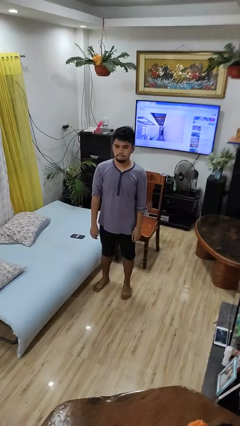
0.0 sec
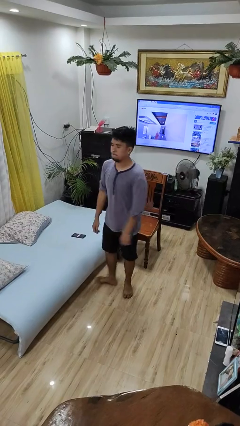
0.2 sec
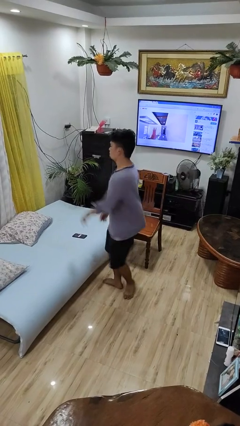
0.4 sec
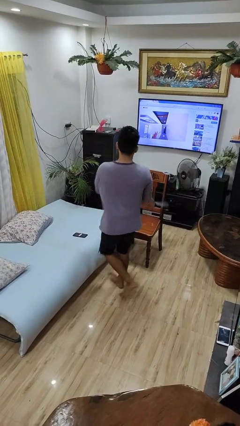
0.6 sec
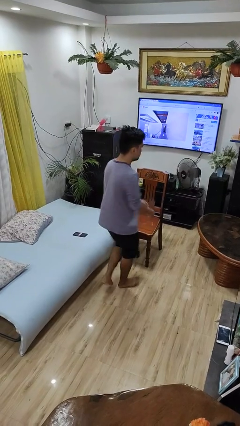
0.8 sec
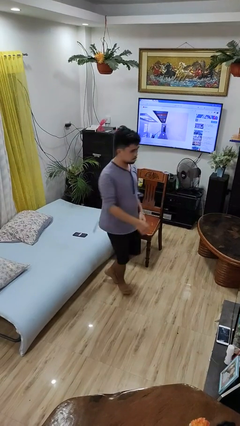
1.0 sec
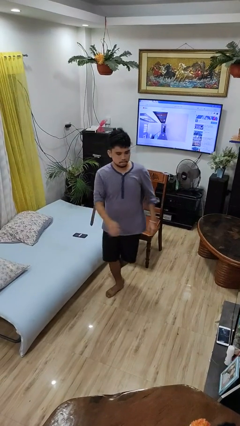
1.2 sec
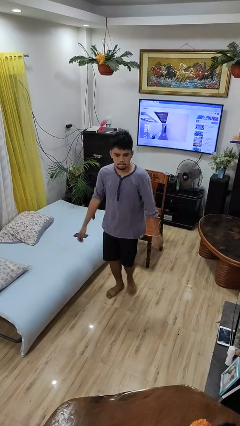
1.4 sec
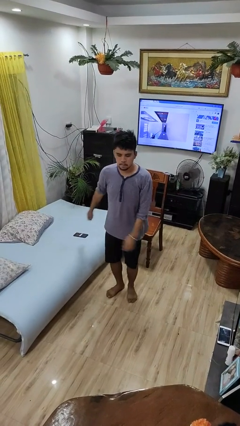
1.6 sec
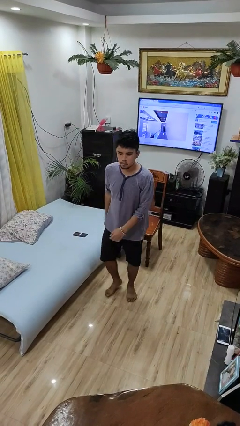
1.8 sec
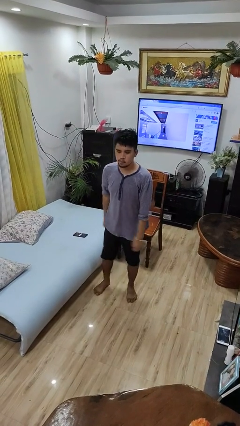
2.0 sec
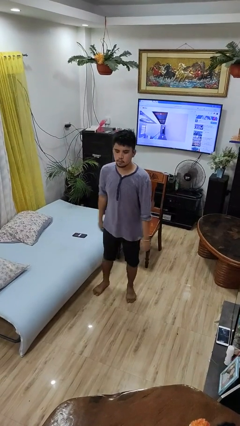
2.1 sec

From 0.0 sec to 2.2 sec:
person twirls

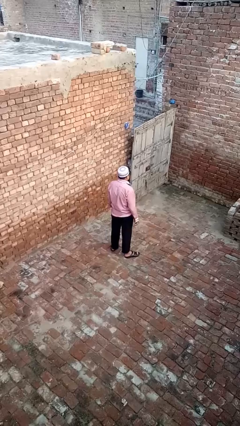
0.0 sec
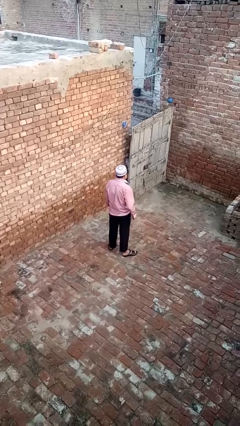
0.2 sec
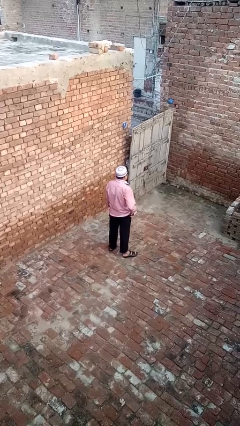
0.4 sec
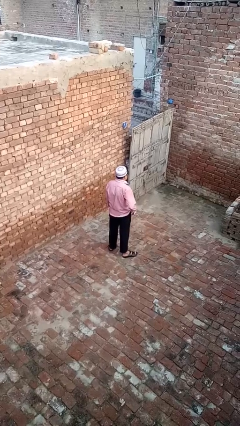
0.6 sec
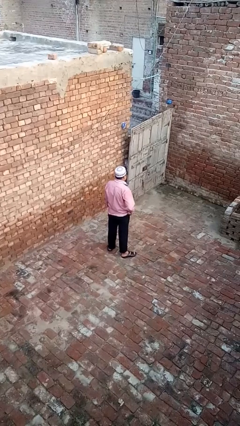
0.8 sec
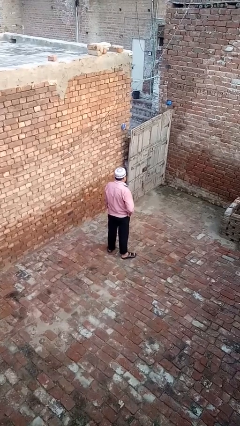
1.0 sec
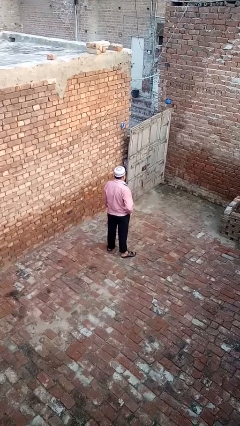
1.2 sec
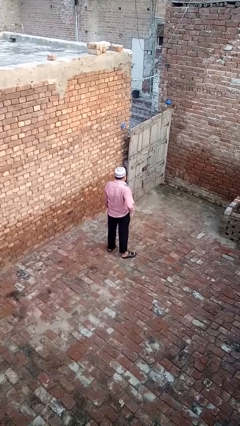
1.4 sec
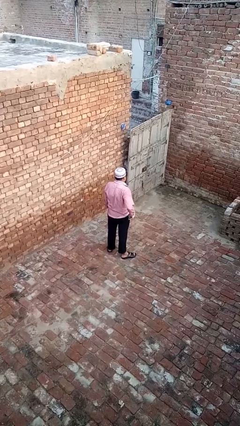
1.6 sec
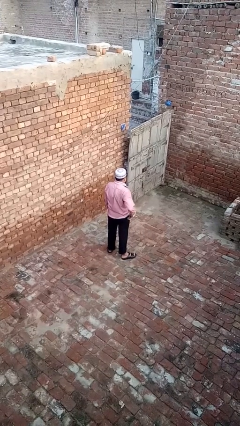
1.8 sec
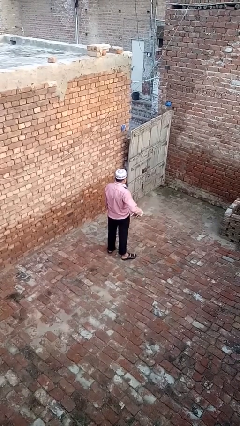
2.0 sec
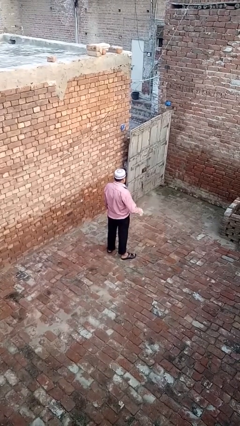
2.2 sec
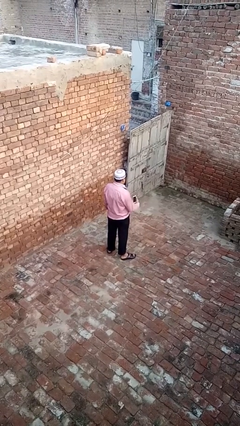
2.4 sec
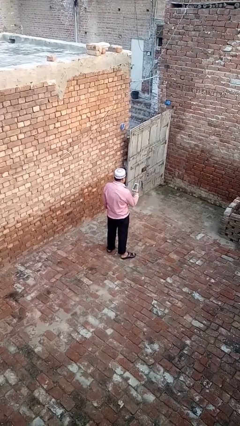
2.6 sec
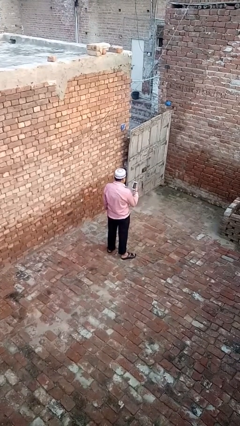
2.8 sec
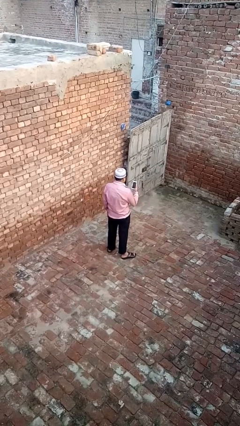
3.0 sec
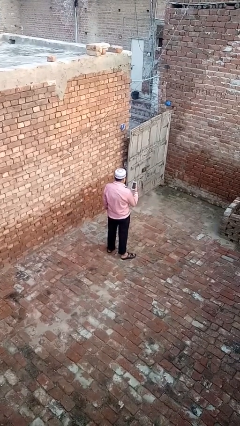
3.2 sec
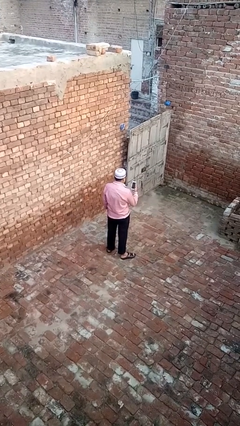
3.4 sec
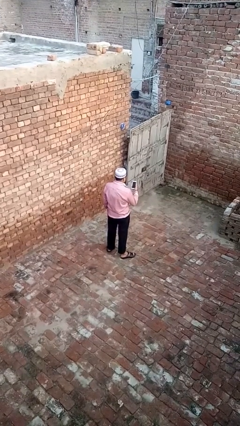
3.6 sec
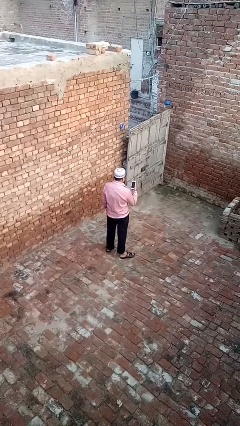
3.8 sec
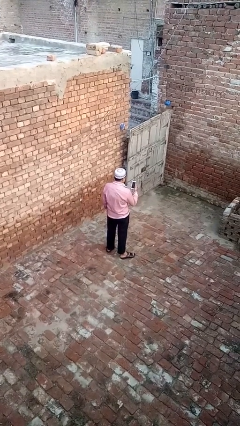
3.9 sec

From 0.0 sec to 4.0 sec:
person takes phone from pocket

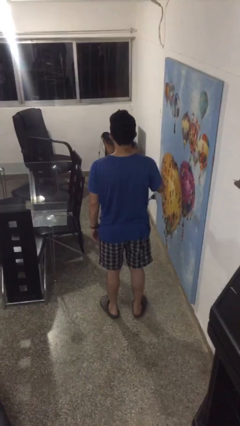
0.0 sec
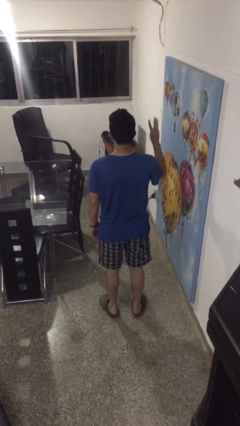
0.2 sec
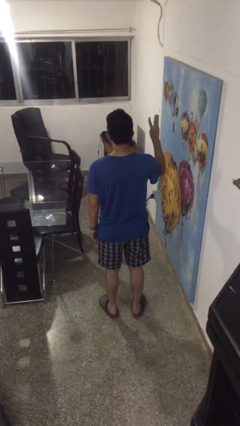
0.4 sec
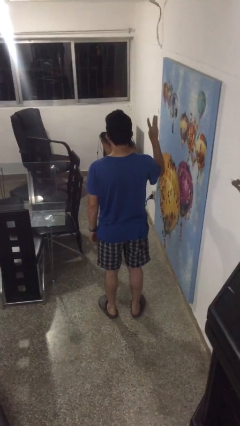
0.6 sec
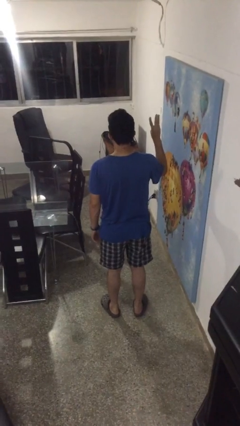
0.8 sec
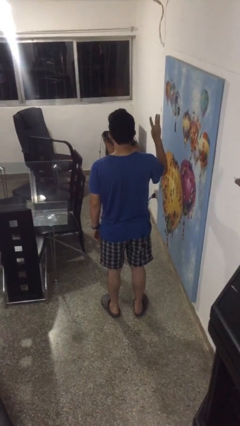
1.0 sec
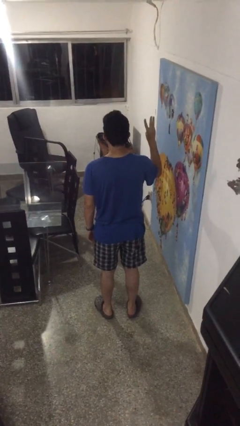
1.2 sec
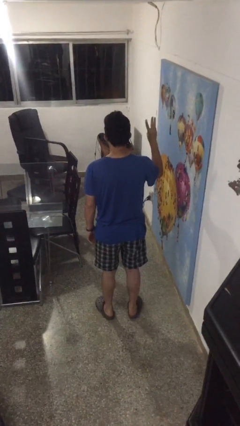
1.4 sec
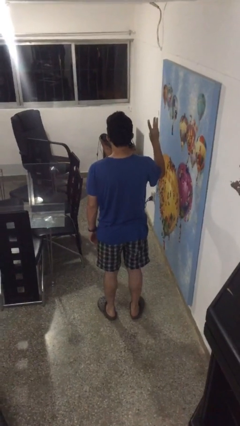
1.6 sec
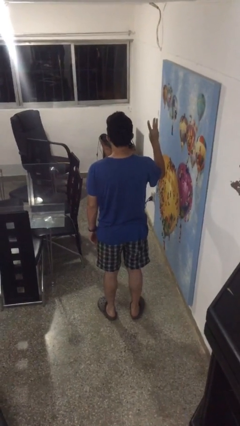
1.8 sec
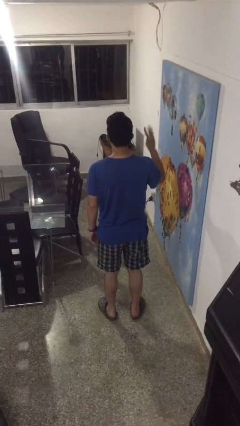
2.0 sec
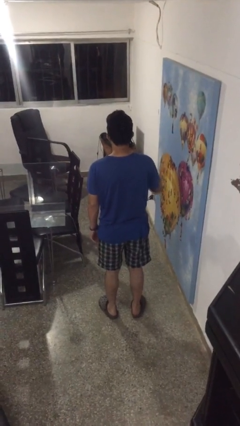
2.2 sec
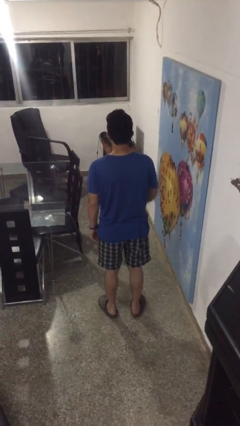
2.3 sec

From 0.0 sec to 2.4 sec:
person gestures number three

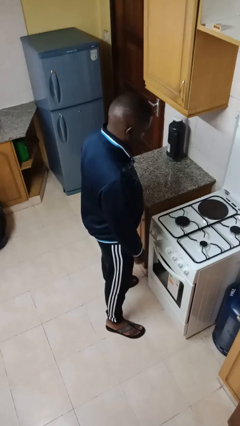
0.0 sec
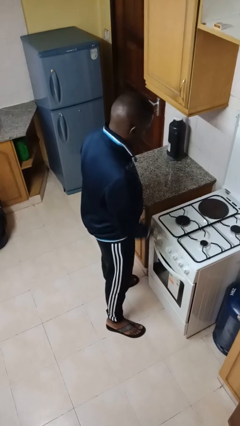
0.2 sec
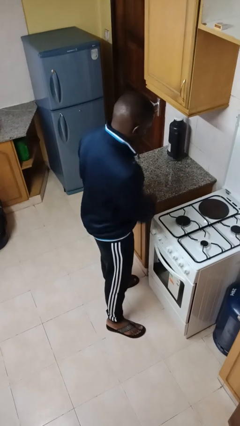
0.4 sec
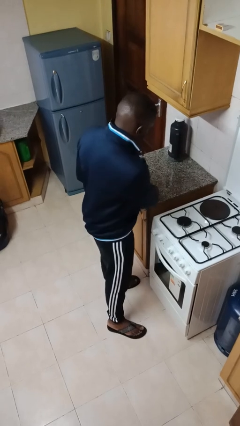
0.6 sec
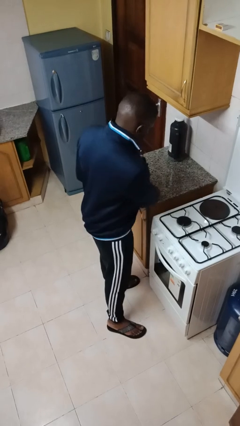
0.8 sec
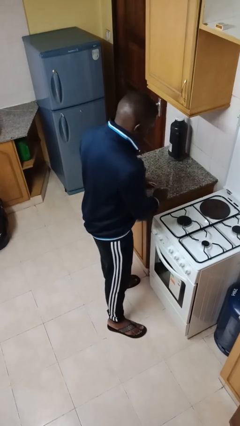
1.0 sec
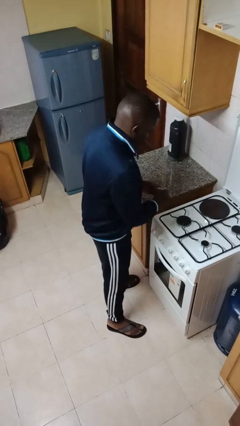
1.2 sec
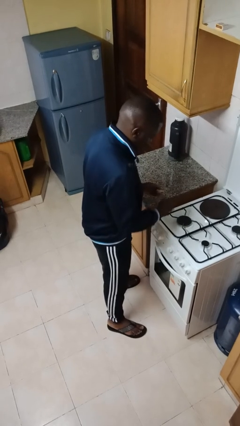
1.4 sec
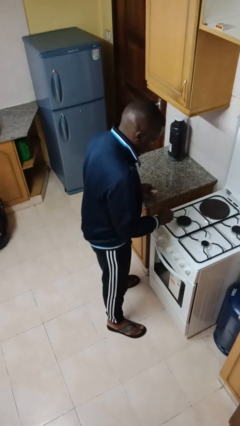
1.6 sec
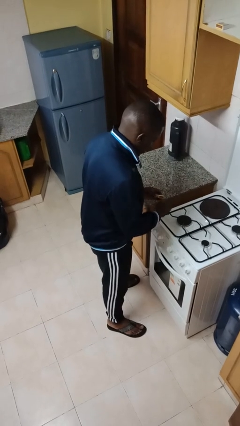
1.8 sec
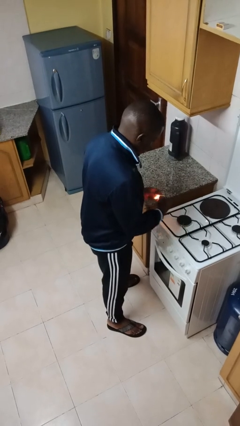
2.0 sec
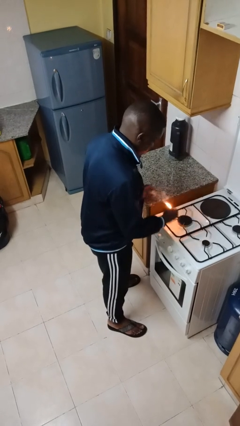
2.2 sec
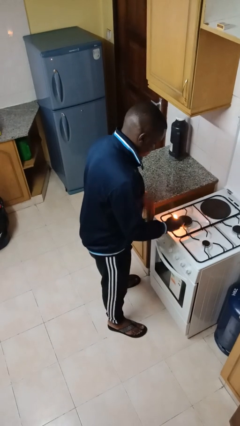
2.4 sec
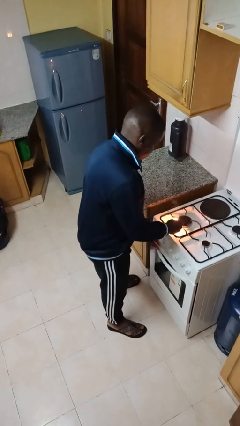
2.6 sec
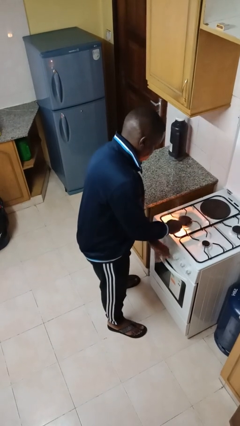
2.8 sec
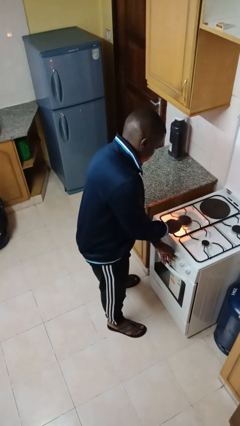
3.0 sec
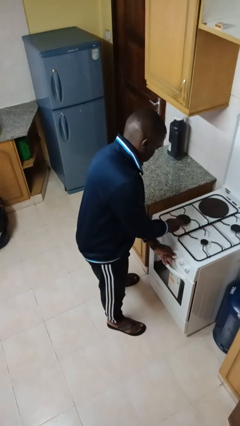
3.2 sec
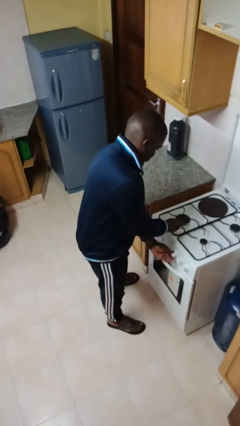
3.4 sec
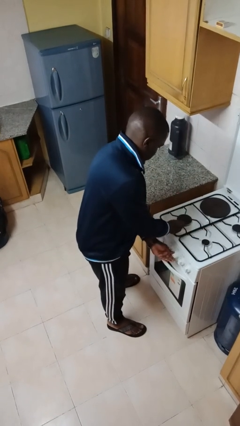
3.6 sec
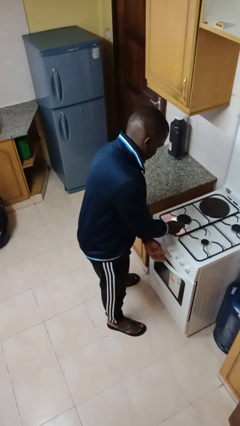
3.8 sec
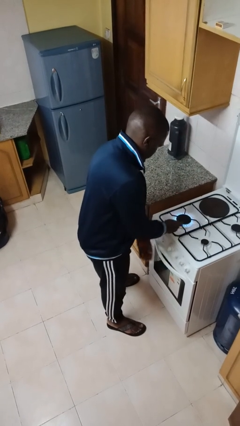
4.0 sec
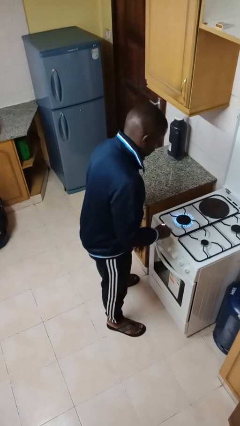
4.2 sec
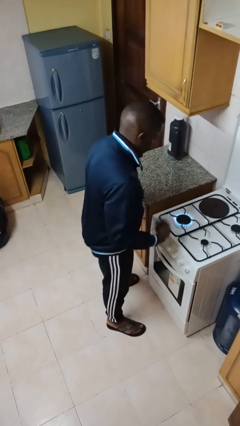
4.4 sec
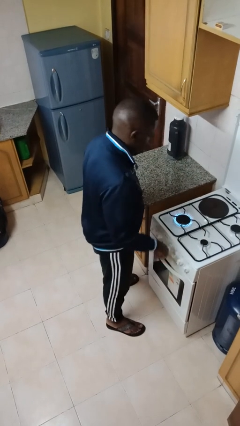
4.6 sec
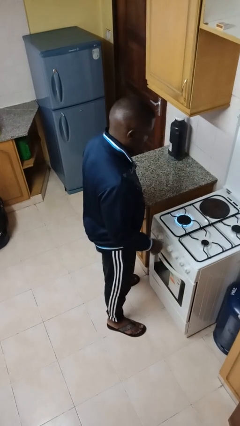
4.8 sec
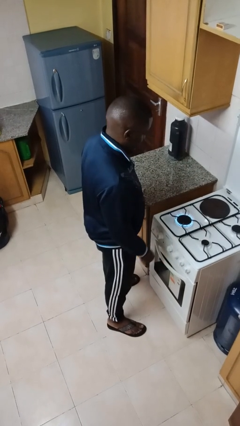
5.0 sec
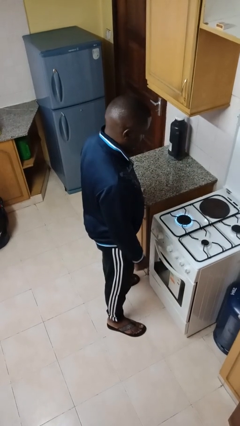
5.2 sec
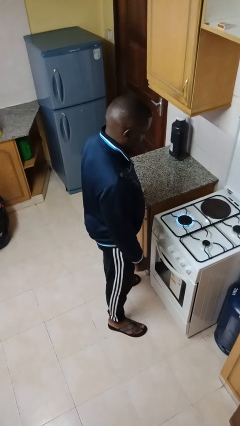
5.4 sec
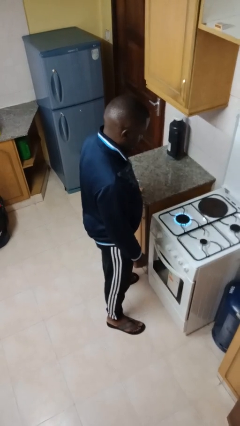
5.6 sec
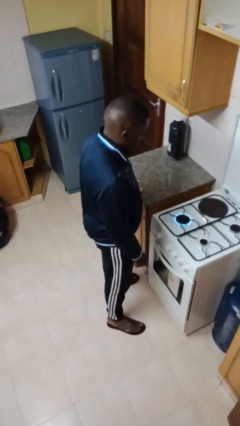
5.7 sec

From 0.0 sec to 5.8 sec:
person turns on stovetop

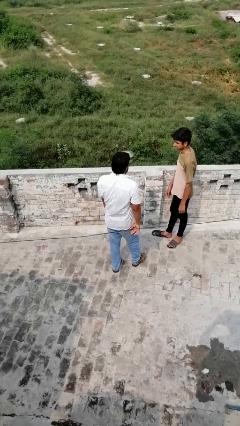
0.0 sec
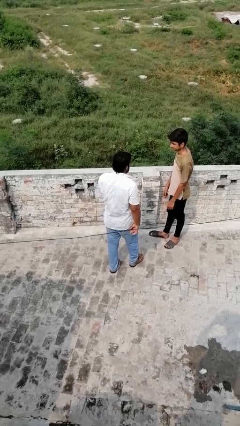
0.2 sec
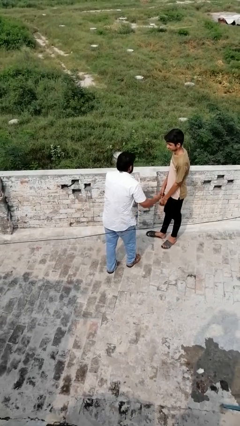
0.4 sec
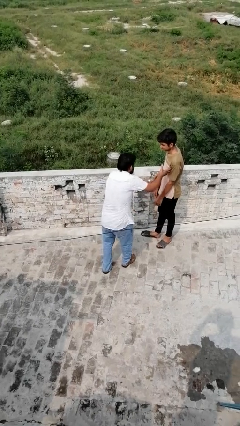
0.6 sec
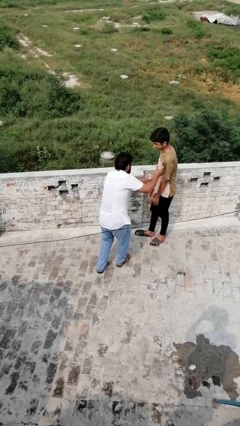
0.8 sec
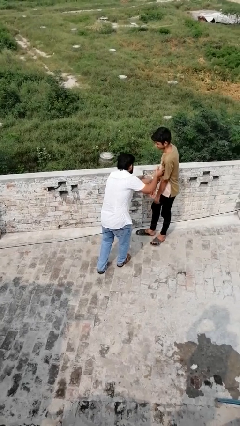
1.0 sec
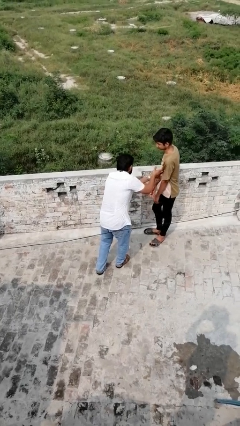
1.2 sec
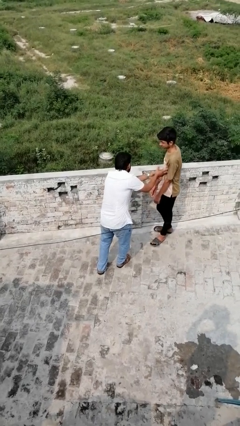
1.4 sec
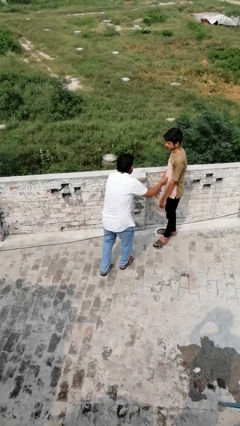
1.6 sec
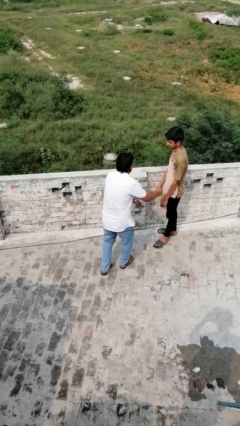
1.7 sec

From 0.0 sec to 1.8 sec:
person tickles person

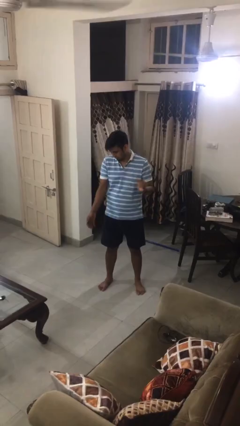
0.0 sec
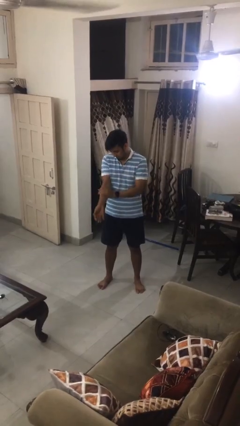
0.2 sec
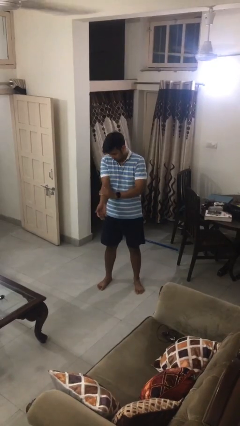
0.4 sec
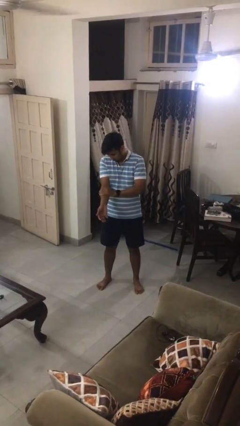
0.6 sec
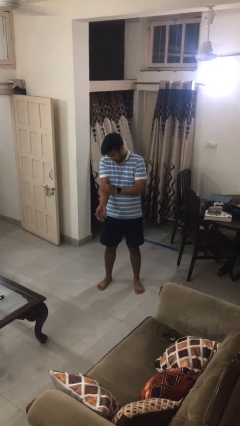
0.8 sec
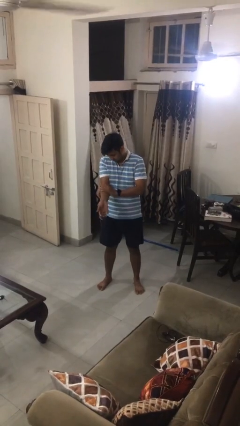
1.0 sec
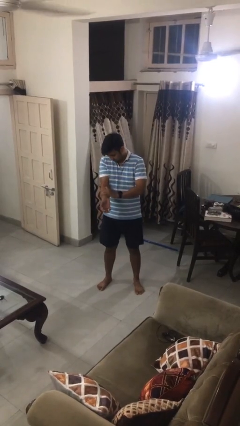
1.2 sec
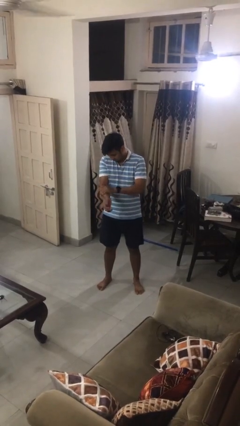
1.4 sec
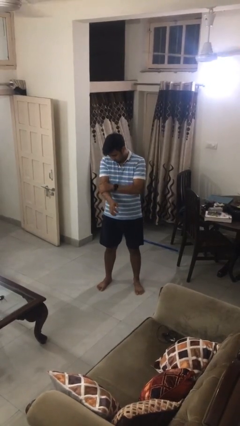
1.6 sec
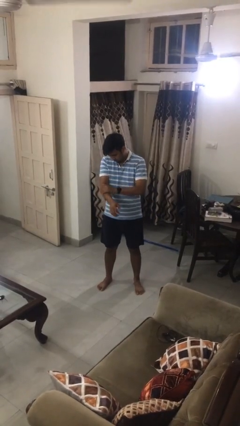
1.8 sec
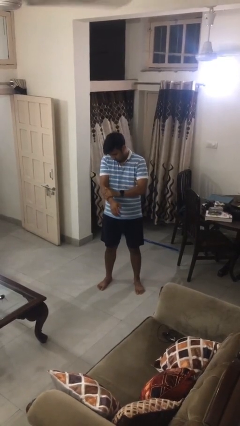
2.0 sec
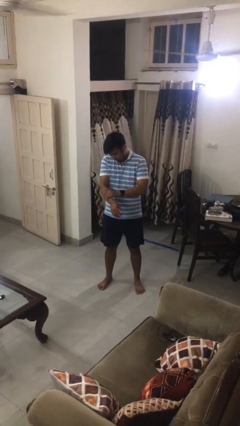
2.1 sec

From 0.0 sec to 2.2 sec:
person swats bug
